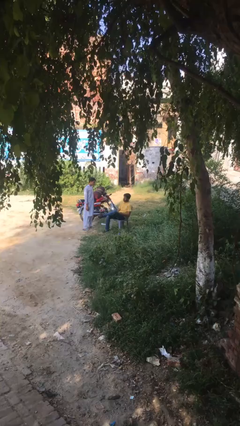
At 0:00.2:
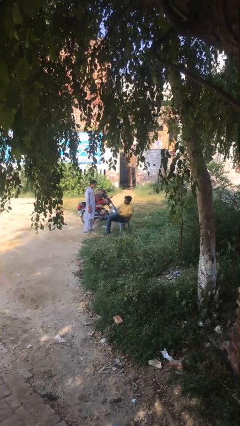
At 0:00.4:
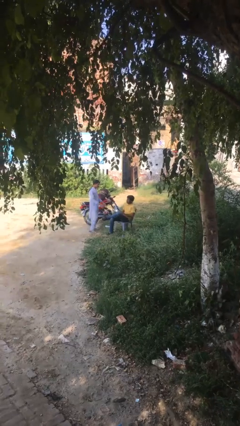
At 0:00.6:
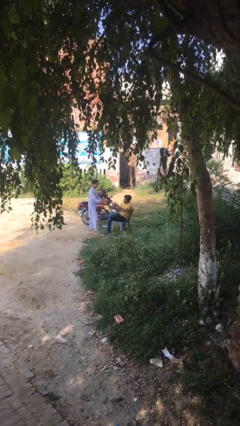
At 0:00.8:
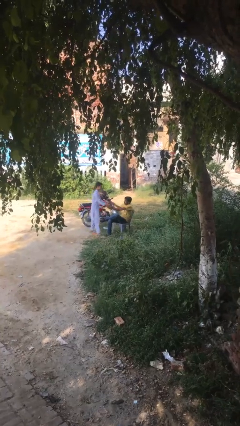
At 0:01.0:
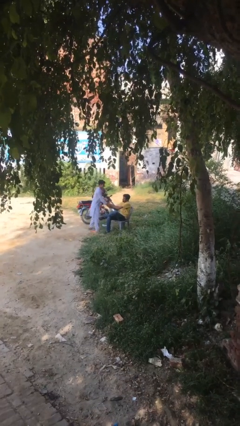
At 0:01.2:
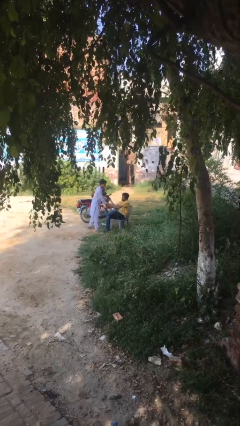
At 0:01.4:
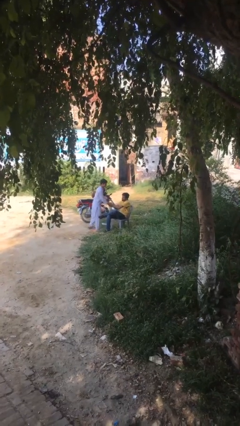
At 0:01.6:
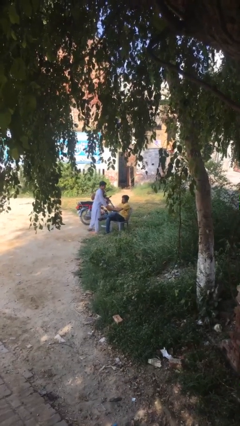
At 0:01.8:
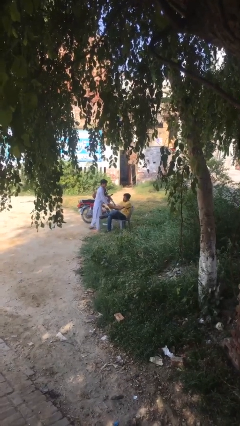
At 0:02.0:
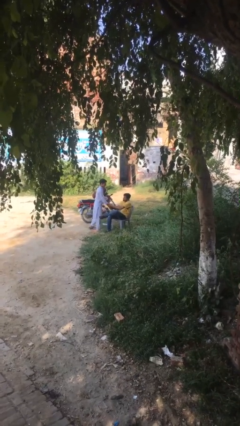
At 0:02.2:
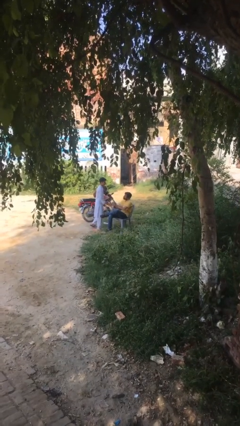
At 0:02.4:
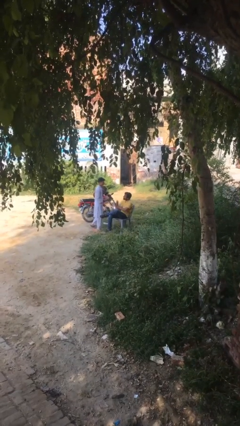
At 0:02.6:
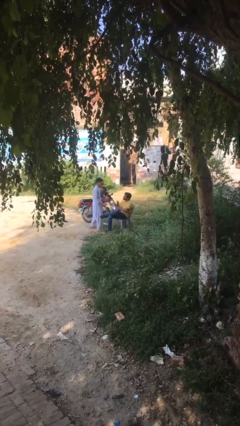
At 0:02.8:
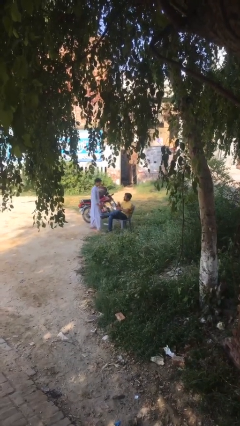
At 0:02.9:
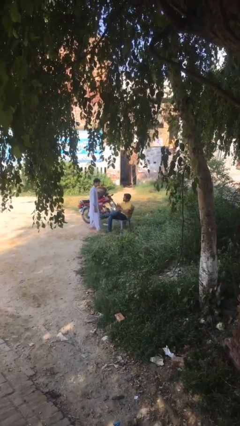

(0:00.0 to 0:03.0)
person shakes hand

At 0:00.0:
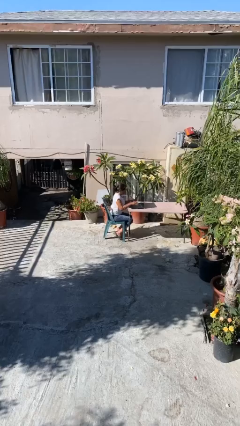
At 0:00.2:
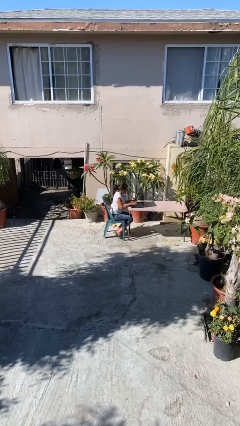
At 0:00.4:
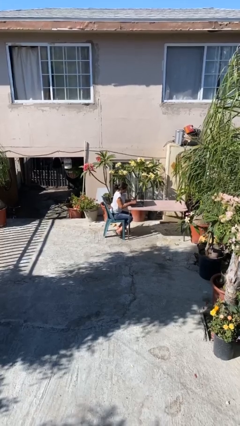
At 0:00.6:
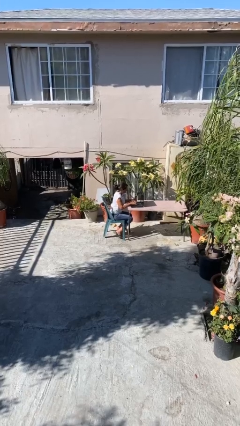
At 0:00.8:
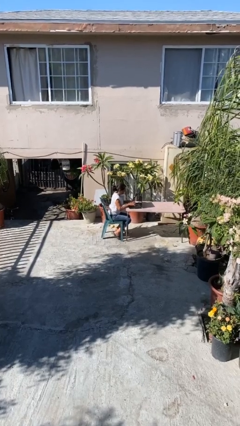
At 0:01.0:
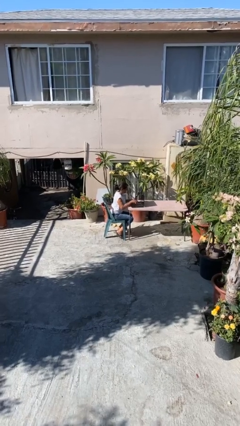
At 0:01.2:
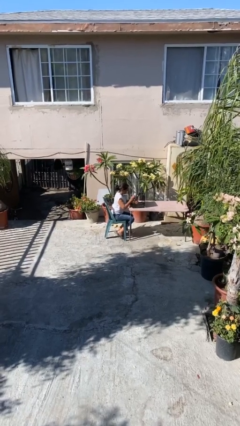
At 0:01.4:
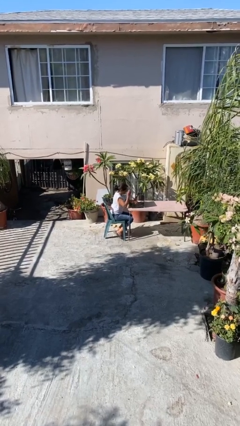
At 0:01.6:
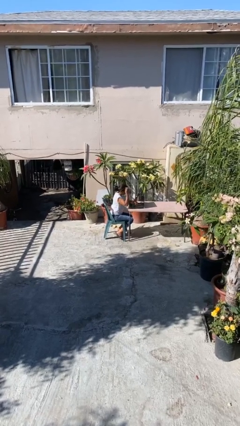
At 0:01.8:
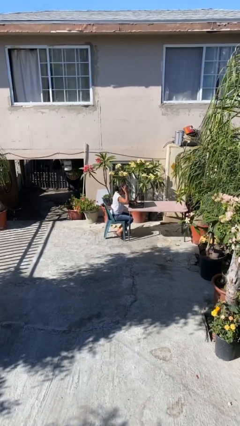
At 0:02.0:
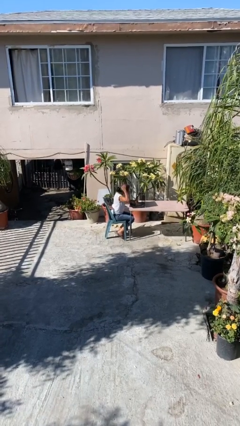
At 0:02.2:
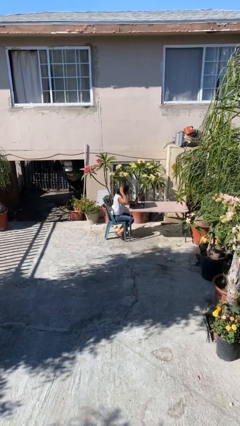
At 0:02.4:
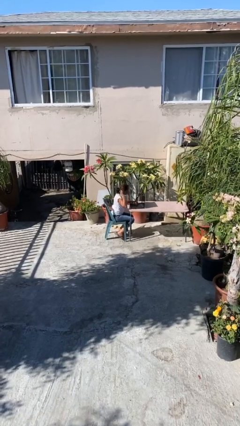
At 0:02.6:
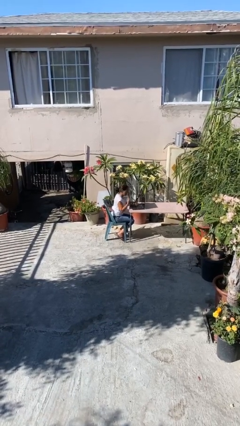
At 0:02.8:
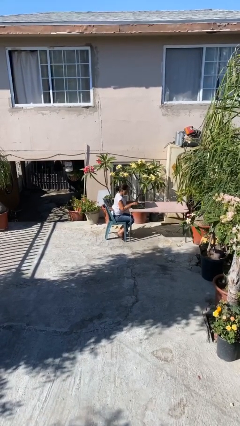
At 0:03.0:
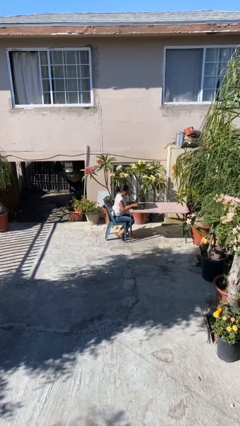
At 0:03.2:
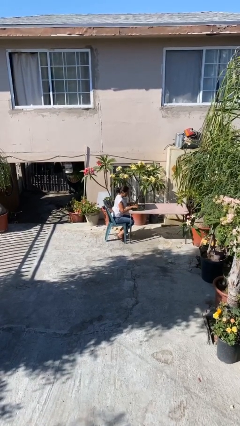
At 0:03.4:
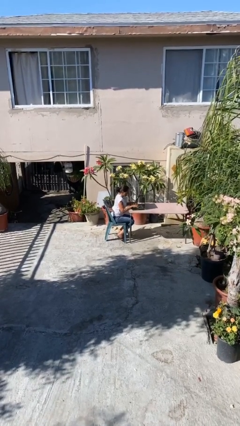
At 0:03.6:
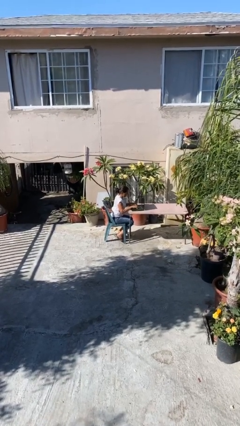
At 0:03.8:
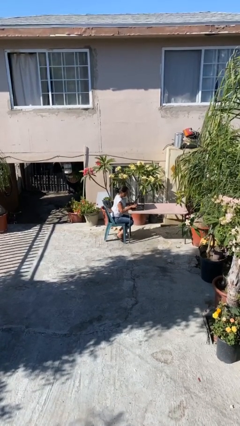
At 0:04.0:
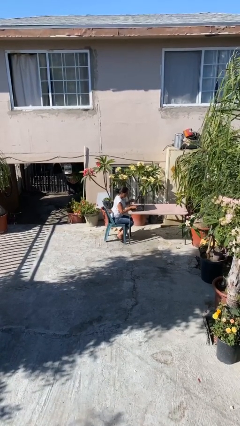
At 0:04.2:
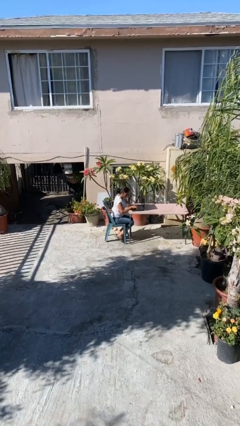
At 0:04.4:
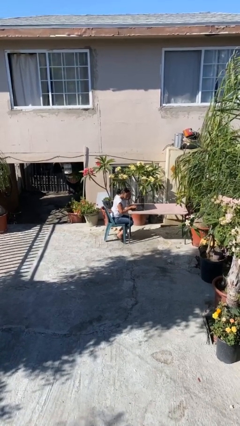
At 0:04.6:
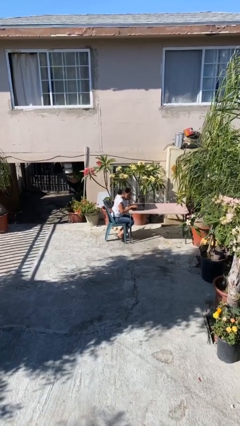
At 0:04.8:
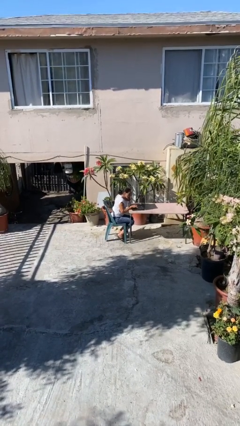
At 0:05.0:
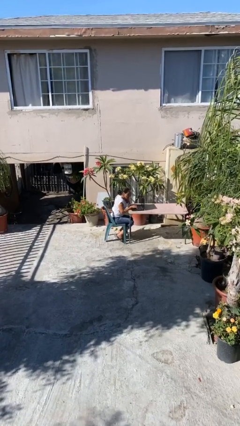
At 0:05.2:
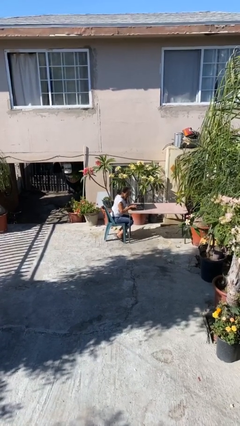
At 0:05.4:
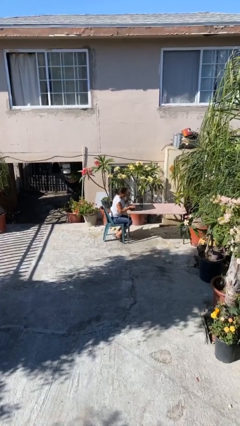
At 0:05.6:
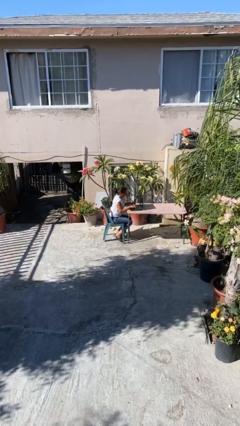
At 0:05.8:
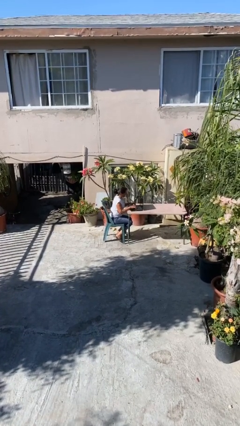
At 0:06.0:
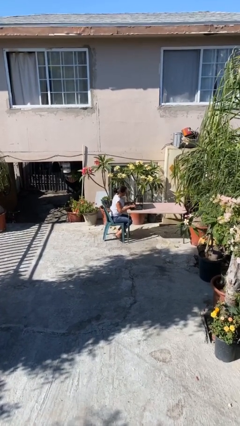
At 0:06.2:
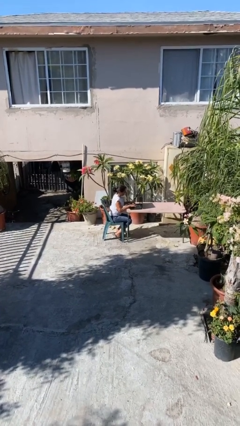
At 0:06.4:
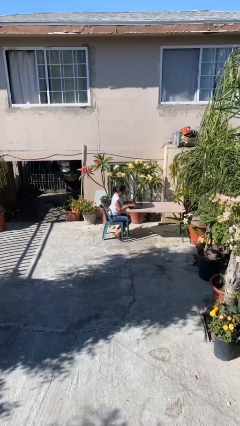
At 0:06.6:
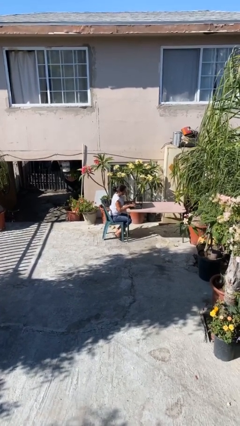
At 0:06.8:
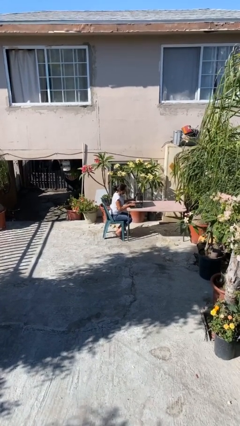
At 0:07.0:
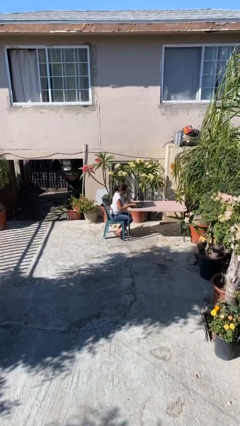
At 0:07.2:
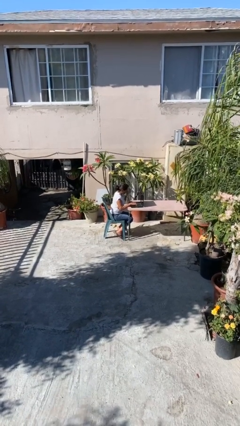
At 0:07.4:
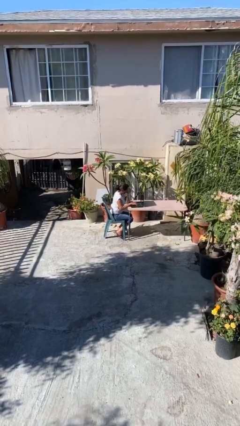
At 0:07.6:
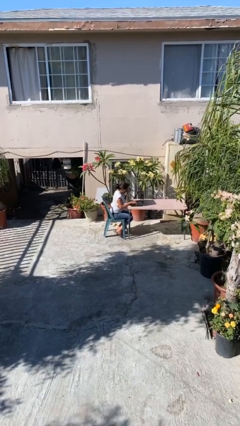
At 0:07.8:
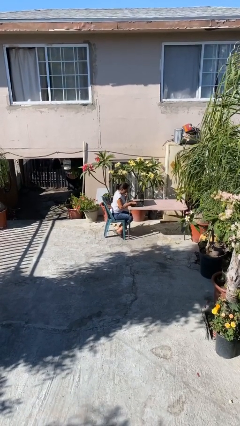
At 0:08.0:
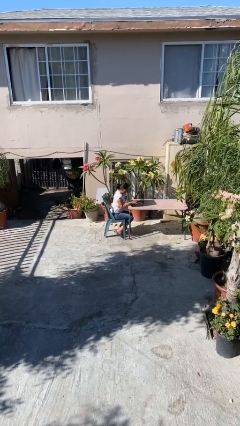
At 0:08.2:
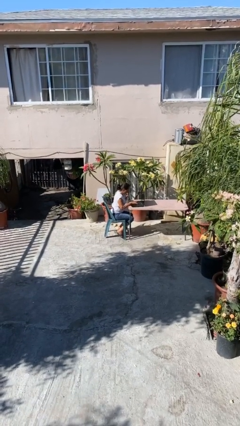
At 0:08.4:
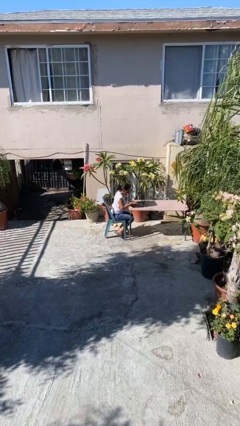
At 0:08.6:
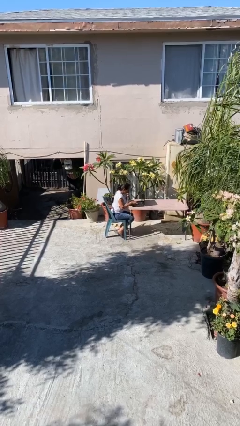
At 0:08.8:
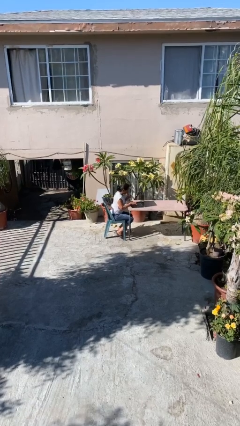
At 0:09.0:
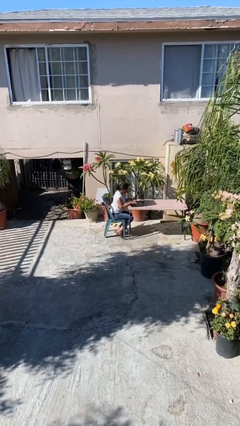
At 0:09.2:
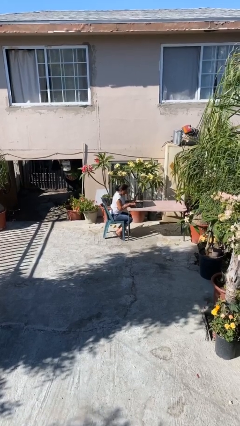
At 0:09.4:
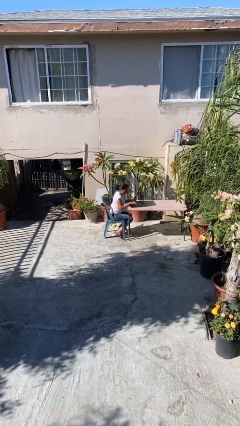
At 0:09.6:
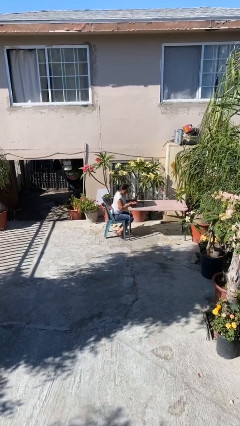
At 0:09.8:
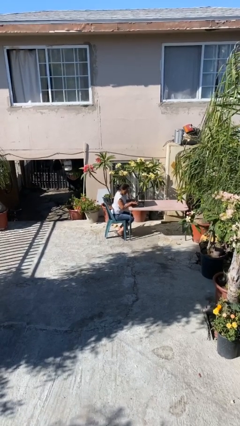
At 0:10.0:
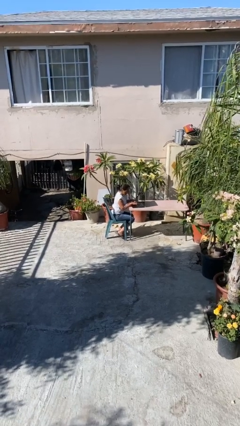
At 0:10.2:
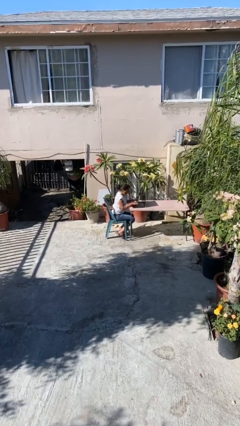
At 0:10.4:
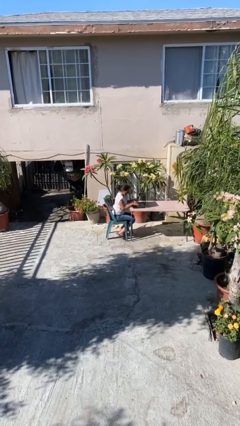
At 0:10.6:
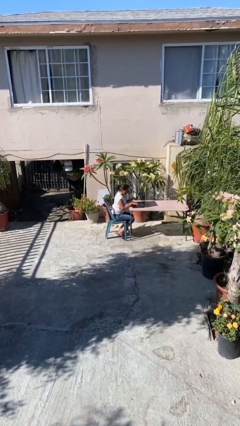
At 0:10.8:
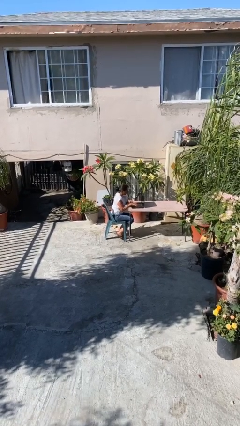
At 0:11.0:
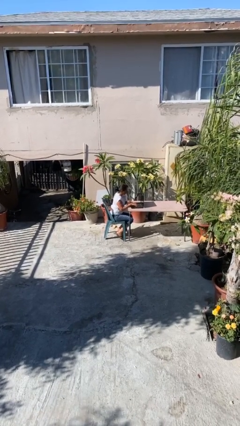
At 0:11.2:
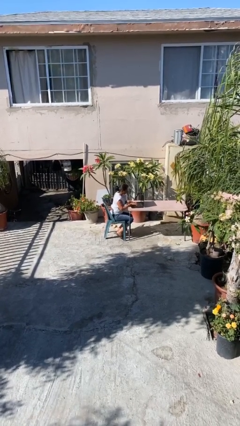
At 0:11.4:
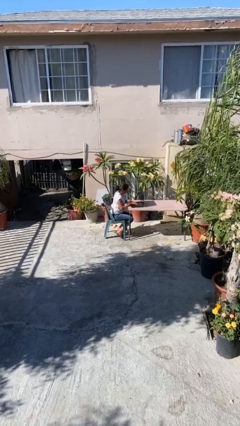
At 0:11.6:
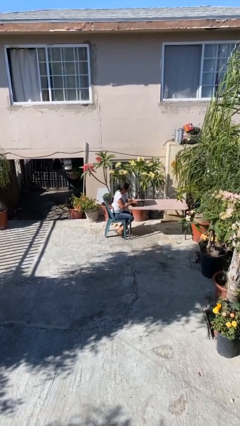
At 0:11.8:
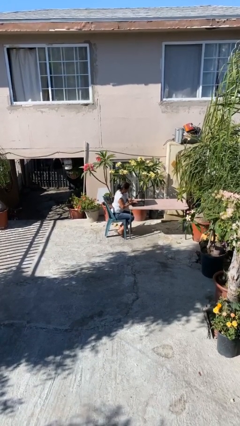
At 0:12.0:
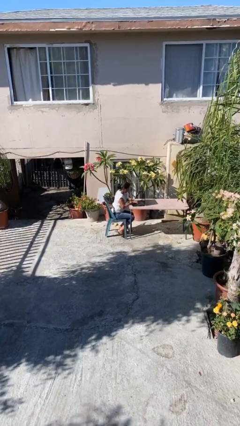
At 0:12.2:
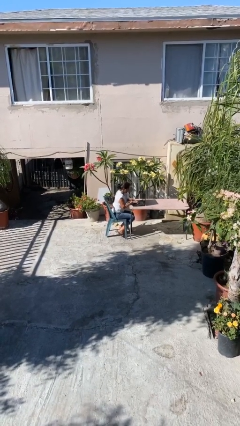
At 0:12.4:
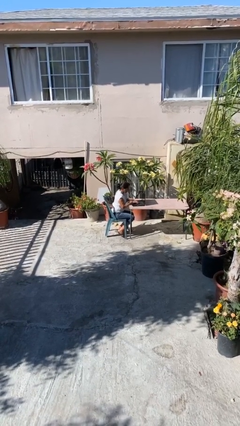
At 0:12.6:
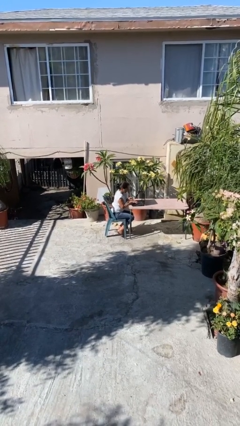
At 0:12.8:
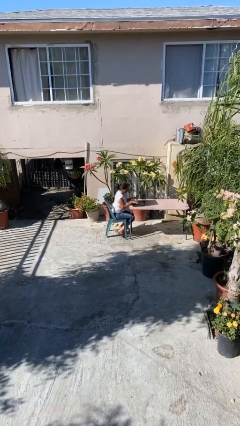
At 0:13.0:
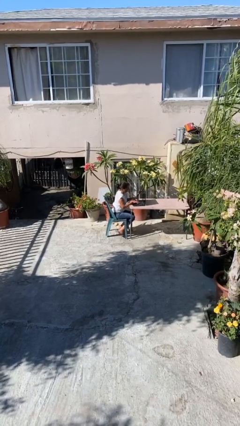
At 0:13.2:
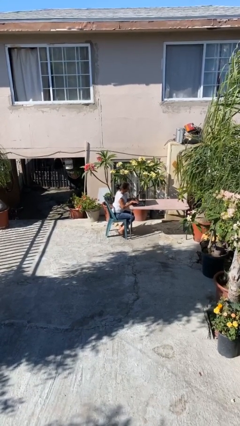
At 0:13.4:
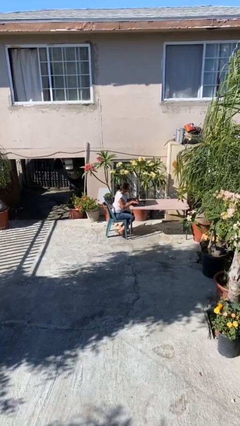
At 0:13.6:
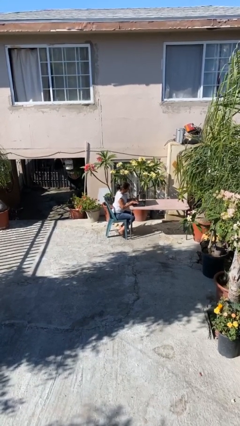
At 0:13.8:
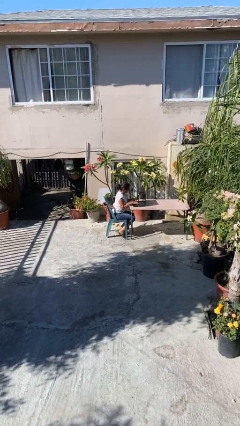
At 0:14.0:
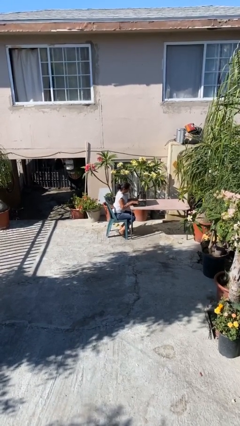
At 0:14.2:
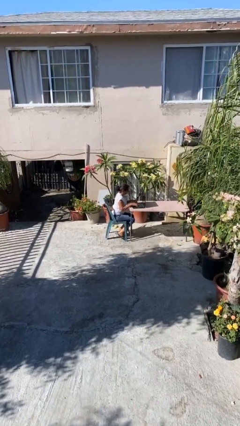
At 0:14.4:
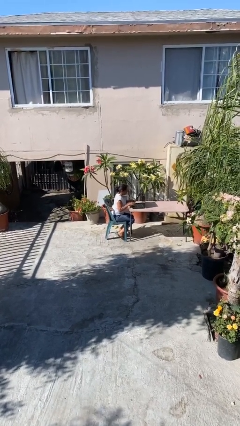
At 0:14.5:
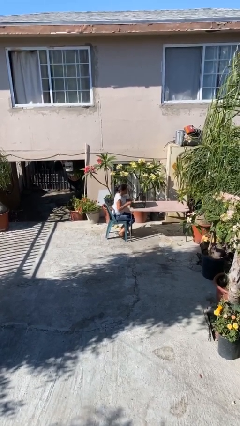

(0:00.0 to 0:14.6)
person interacts with laptop
